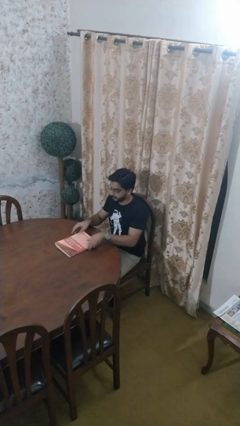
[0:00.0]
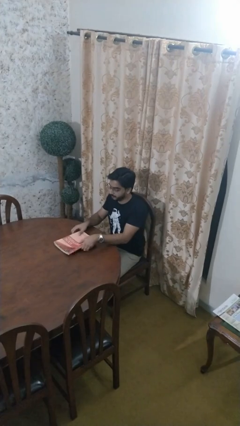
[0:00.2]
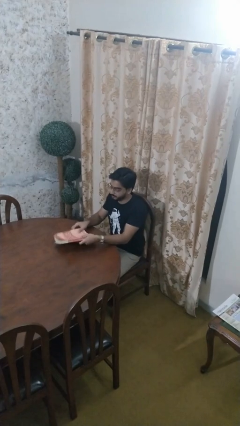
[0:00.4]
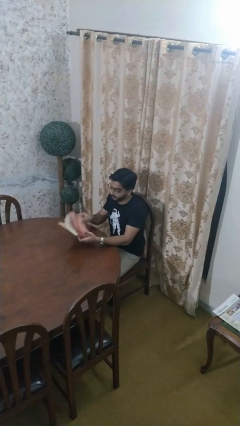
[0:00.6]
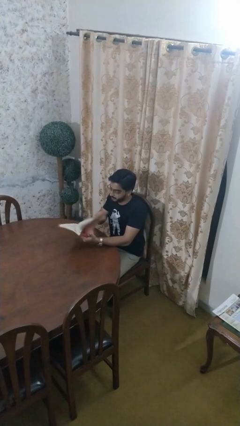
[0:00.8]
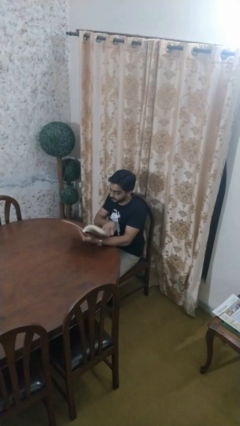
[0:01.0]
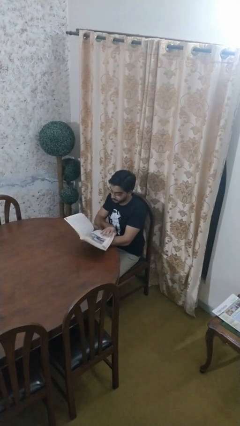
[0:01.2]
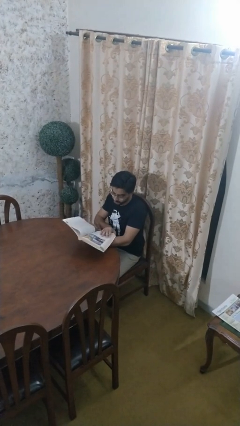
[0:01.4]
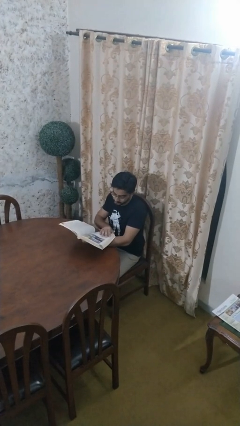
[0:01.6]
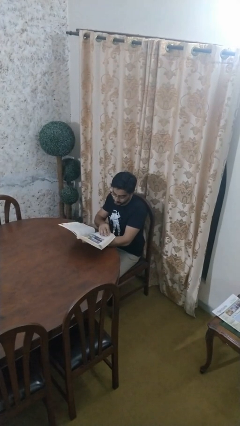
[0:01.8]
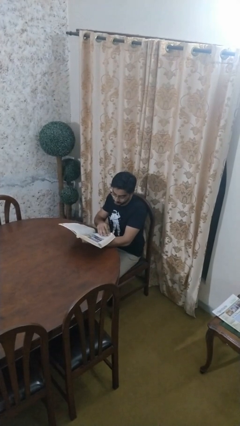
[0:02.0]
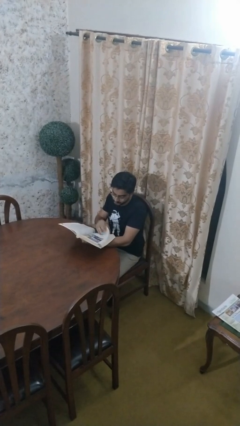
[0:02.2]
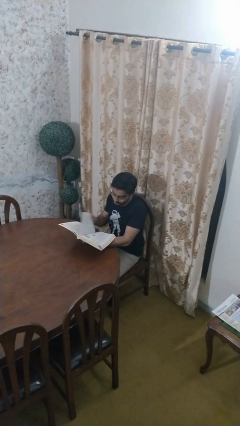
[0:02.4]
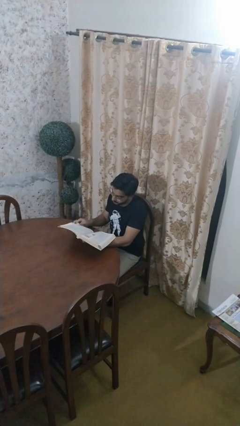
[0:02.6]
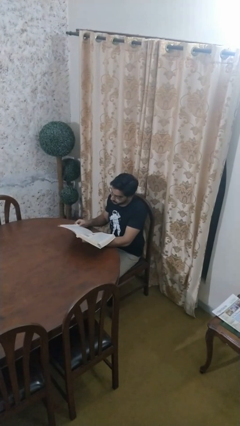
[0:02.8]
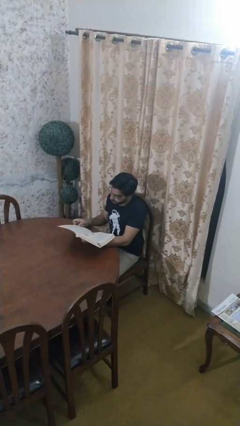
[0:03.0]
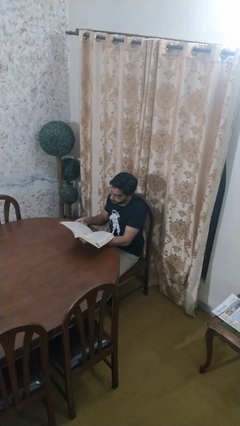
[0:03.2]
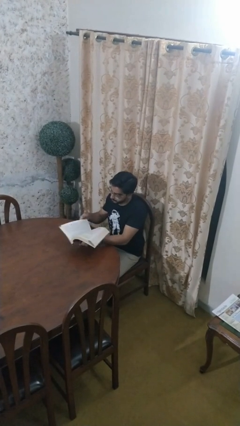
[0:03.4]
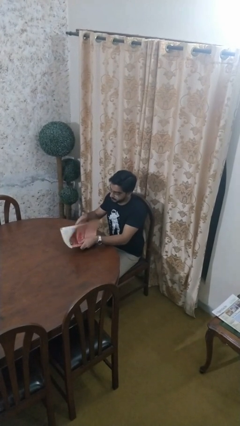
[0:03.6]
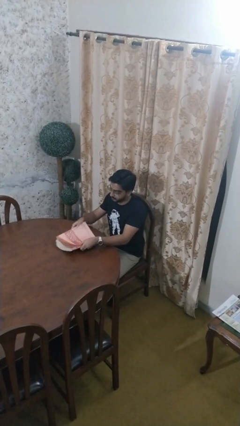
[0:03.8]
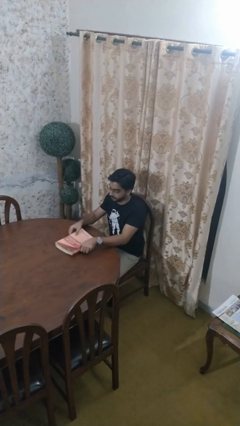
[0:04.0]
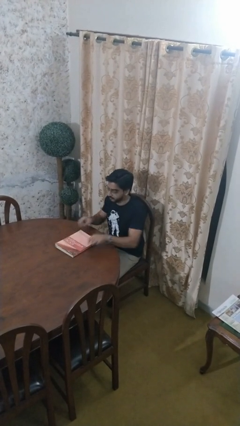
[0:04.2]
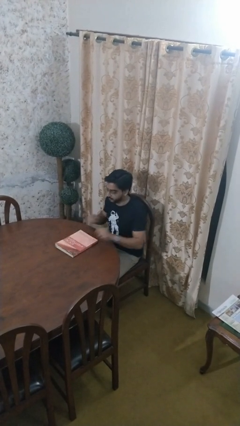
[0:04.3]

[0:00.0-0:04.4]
person reads book

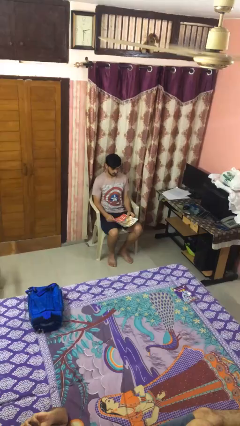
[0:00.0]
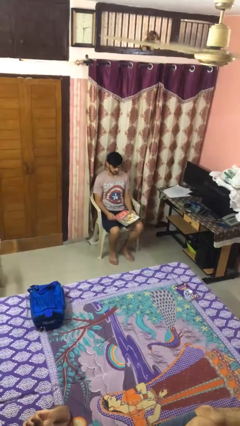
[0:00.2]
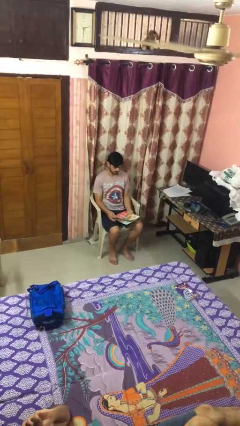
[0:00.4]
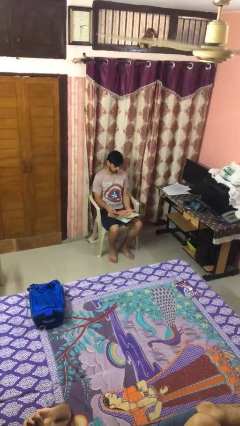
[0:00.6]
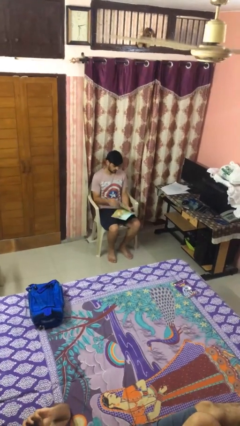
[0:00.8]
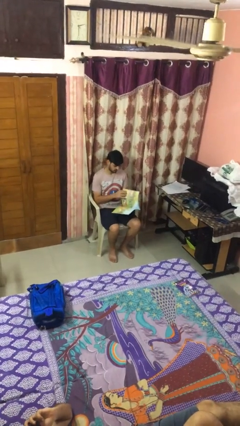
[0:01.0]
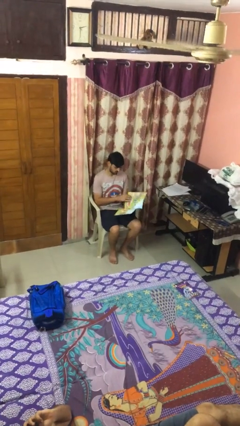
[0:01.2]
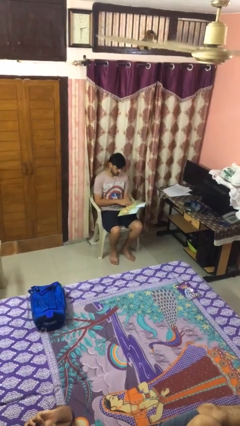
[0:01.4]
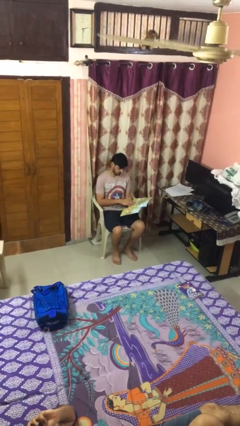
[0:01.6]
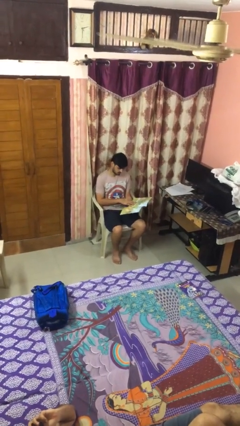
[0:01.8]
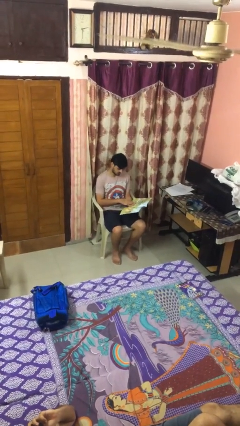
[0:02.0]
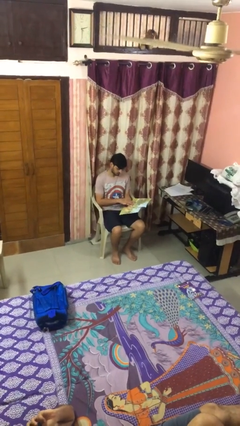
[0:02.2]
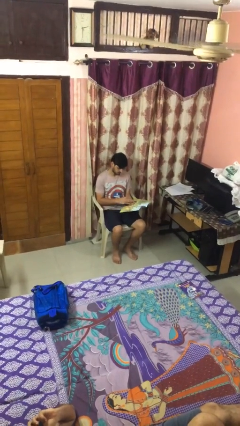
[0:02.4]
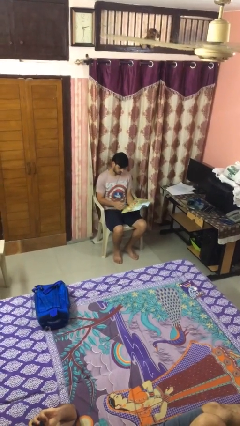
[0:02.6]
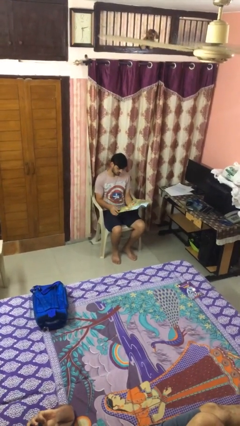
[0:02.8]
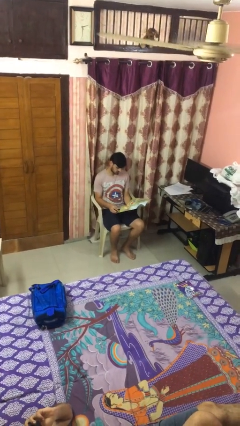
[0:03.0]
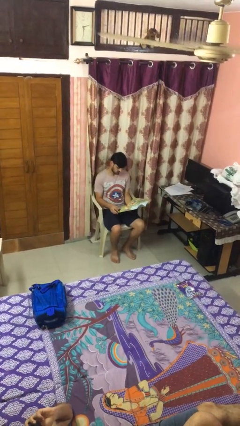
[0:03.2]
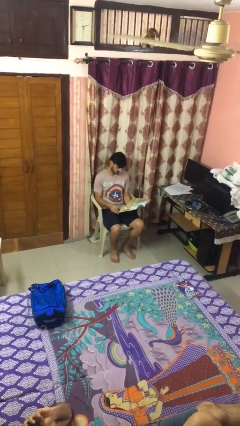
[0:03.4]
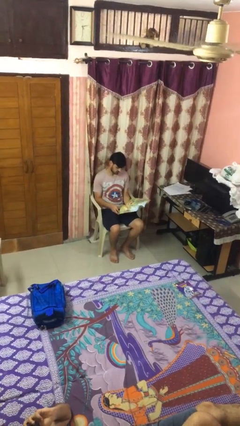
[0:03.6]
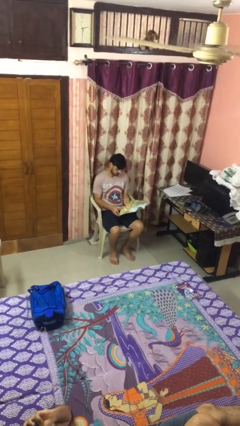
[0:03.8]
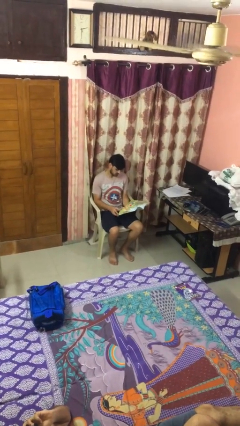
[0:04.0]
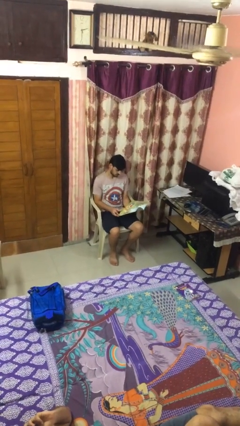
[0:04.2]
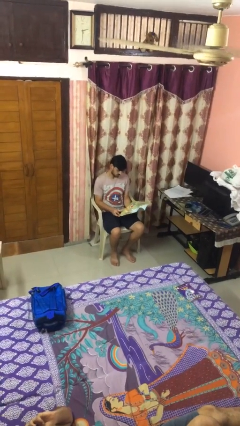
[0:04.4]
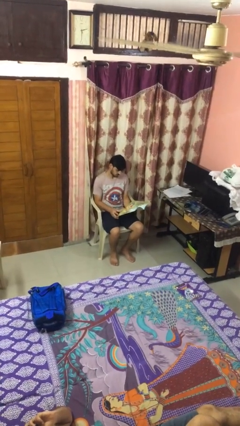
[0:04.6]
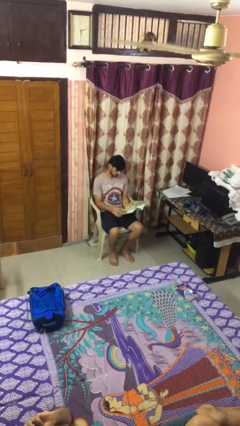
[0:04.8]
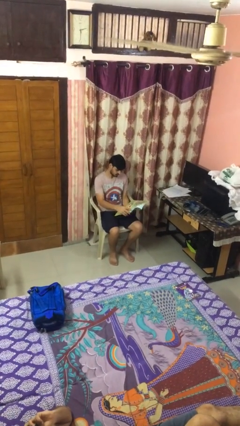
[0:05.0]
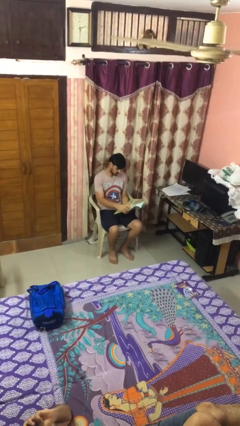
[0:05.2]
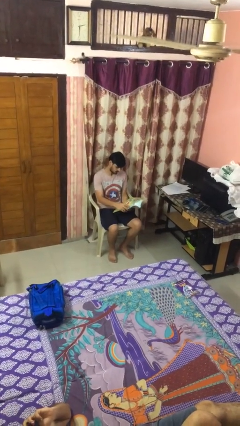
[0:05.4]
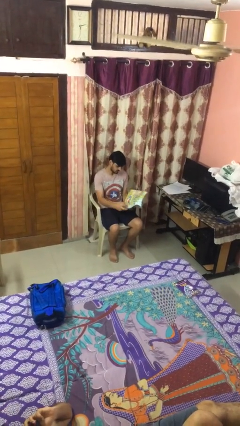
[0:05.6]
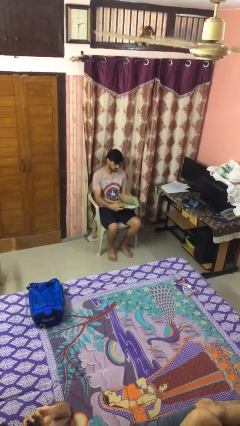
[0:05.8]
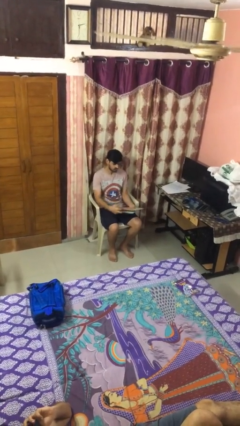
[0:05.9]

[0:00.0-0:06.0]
person reads magazine

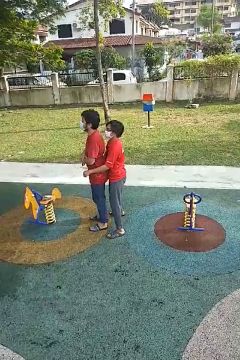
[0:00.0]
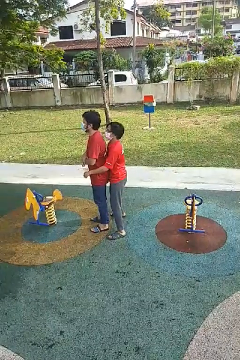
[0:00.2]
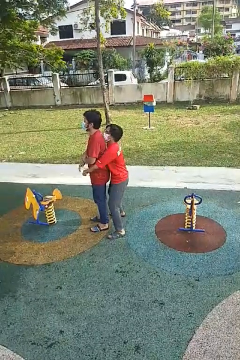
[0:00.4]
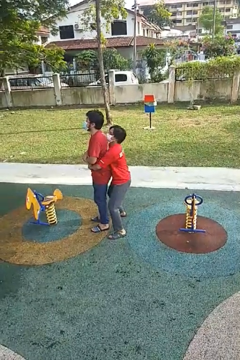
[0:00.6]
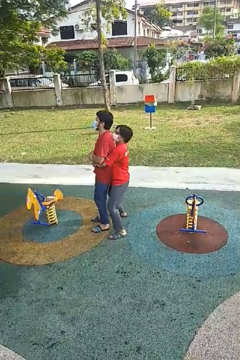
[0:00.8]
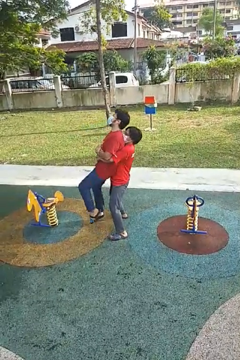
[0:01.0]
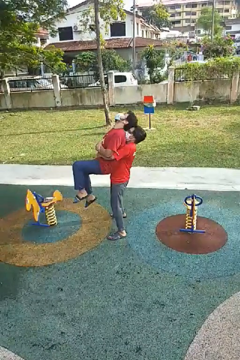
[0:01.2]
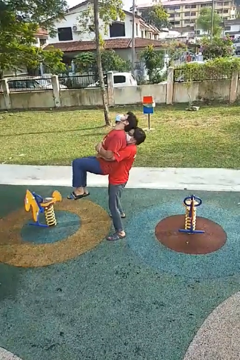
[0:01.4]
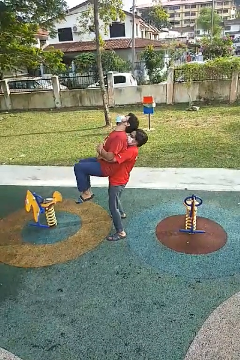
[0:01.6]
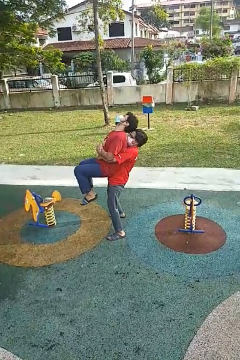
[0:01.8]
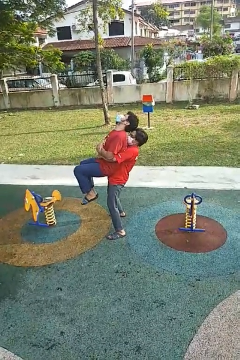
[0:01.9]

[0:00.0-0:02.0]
person picks up person

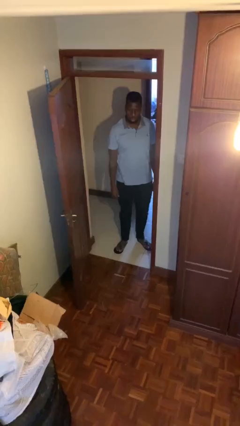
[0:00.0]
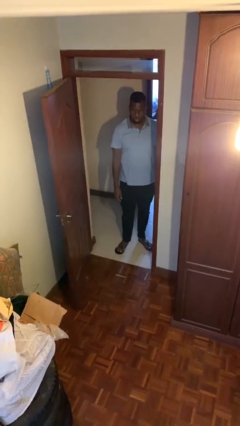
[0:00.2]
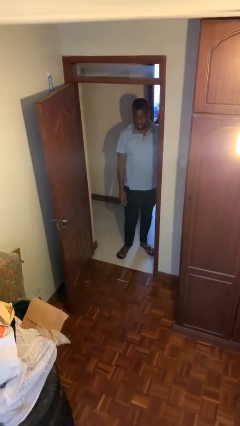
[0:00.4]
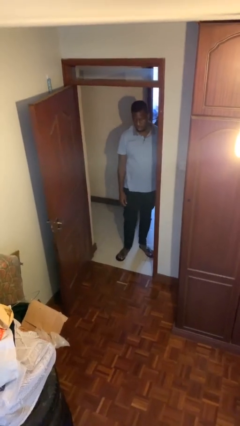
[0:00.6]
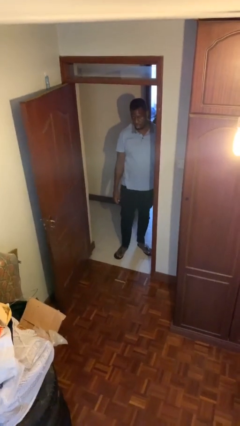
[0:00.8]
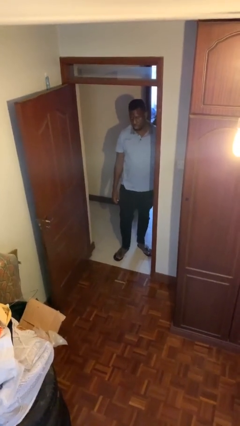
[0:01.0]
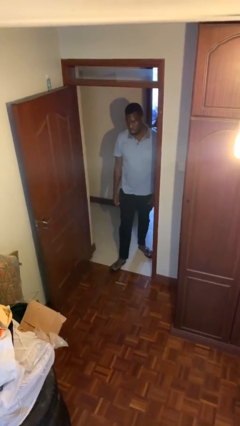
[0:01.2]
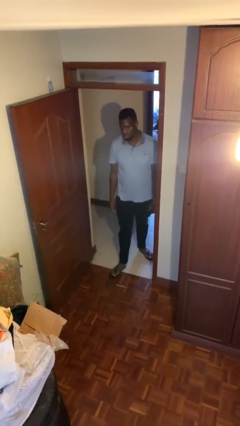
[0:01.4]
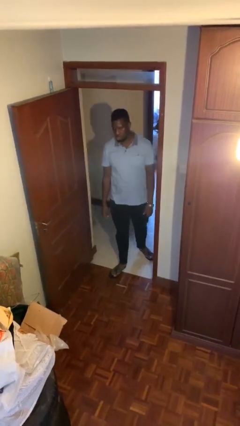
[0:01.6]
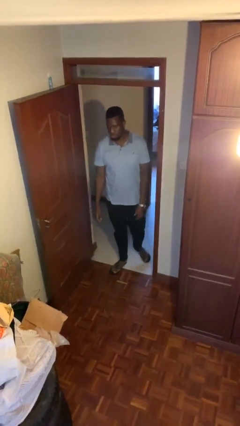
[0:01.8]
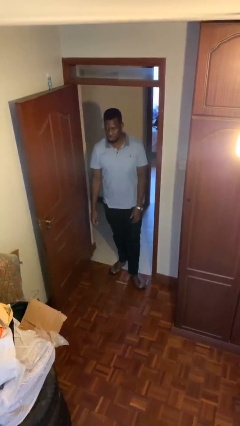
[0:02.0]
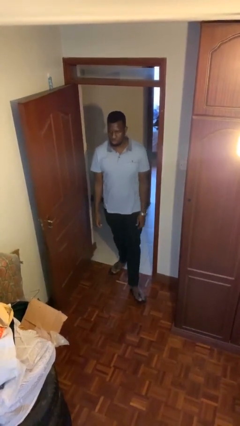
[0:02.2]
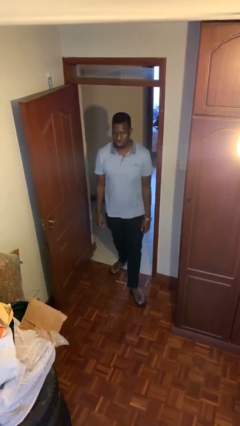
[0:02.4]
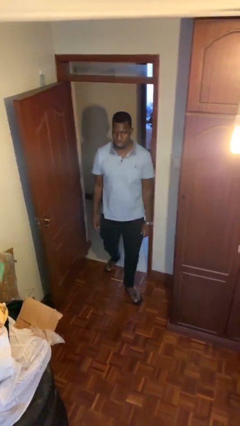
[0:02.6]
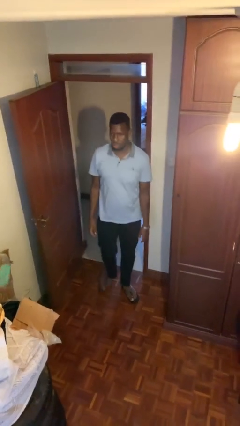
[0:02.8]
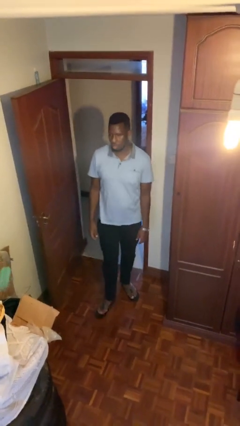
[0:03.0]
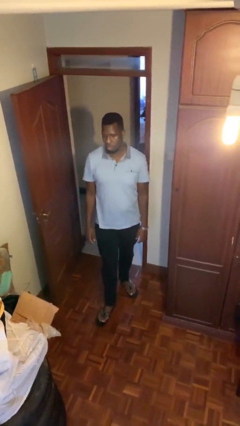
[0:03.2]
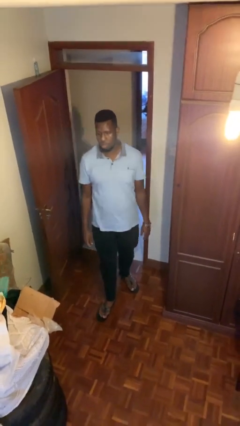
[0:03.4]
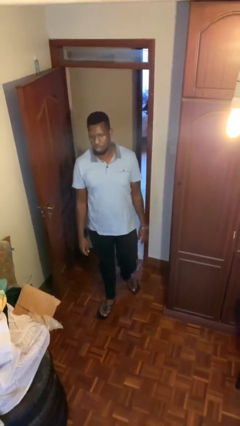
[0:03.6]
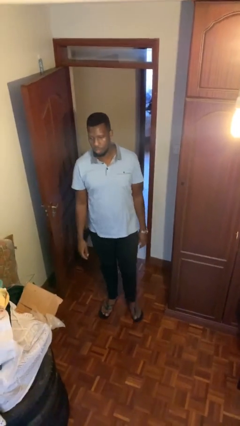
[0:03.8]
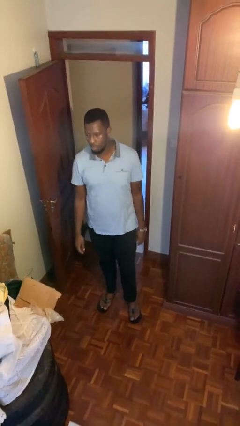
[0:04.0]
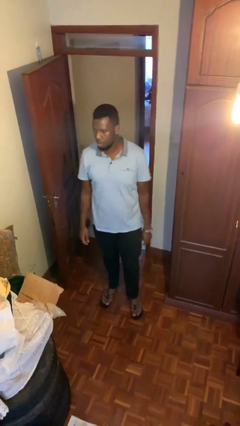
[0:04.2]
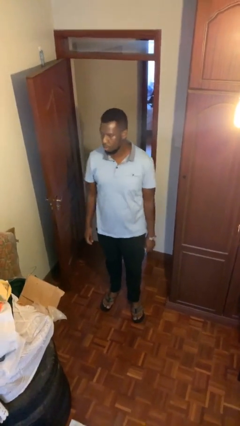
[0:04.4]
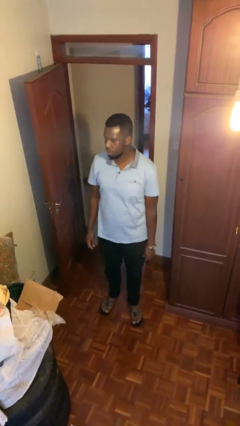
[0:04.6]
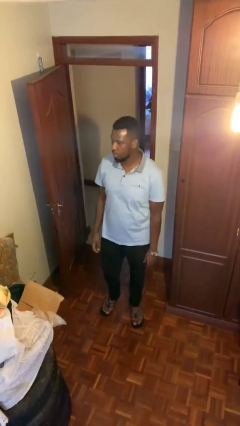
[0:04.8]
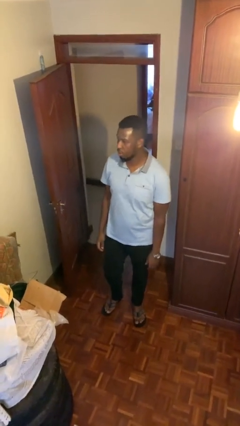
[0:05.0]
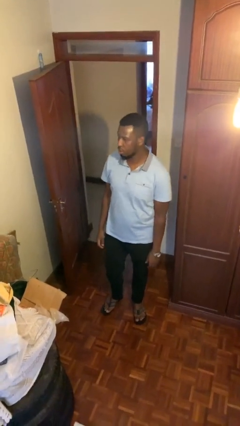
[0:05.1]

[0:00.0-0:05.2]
person enters scene through structure

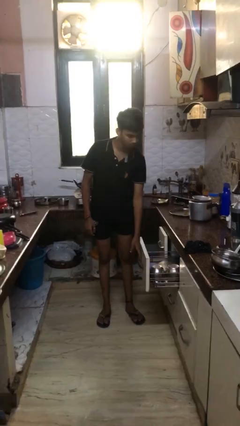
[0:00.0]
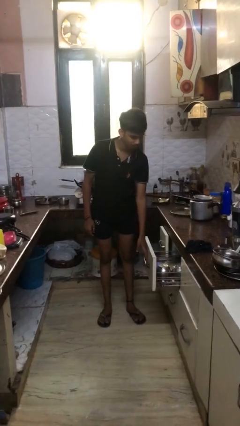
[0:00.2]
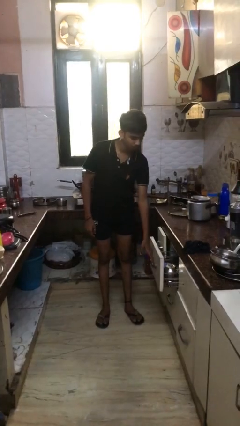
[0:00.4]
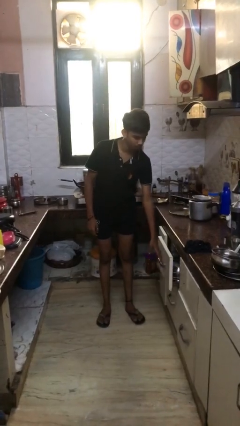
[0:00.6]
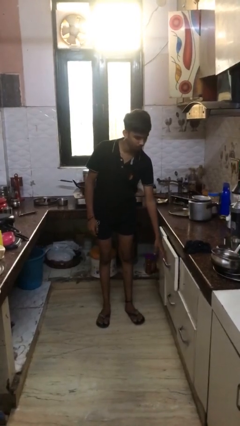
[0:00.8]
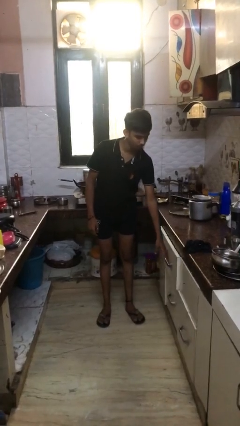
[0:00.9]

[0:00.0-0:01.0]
person closes kitchen drawer
